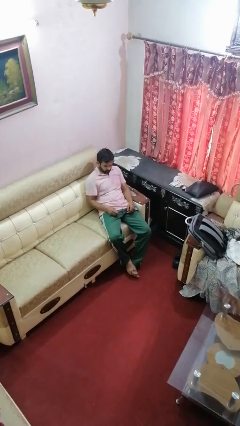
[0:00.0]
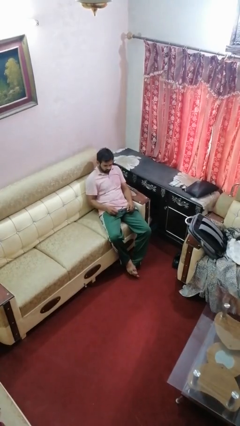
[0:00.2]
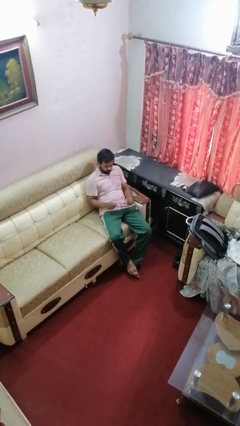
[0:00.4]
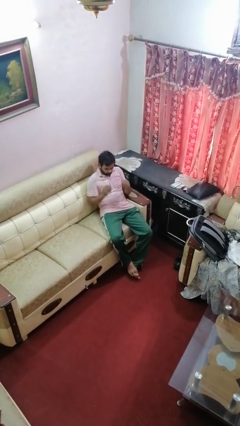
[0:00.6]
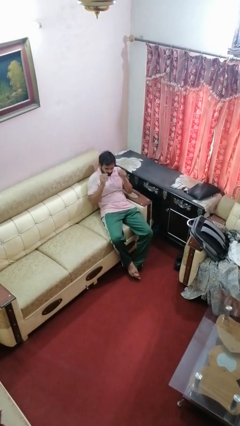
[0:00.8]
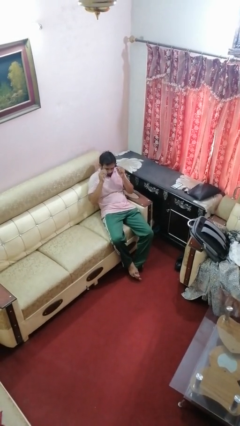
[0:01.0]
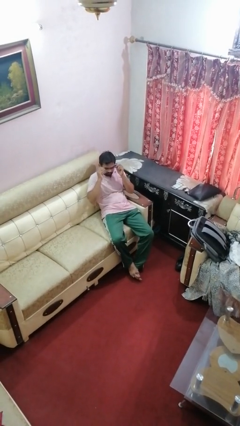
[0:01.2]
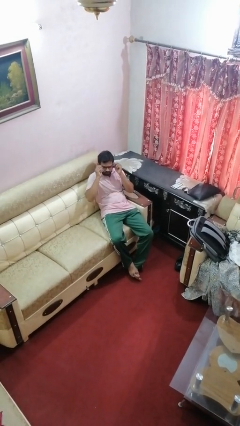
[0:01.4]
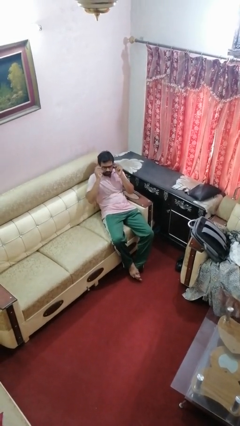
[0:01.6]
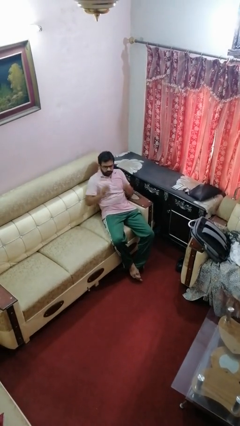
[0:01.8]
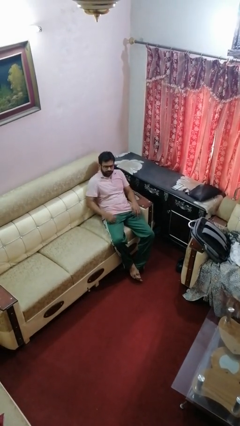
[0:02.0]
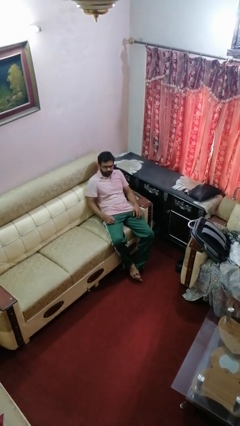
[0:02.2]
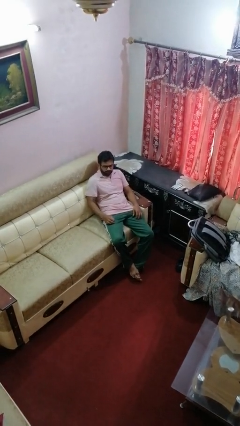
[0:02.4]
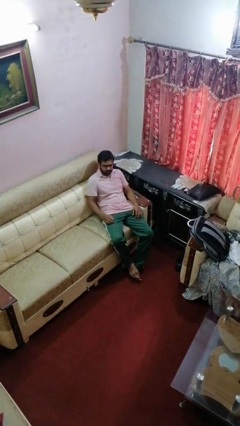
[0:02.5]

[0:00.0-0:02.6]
person puts on glasses

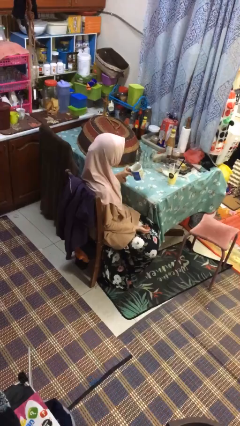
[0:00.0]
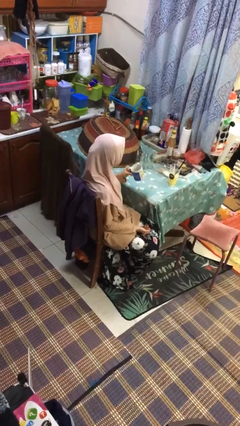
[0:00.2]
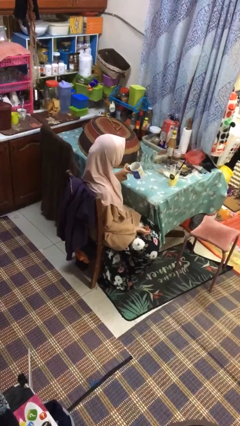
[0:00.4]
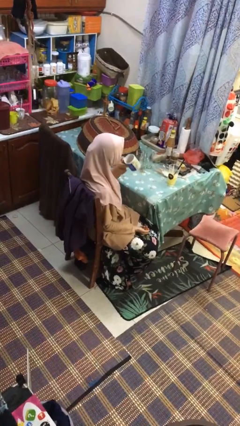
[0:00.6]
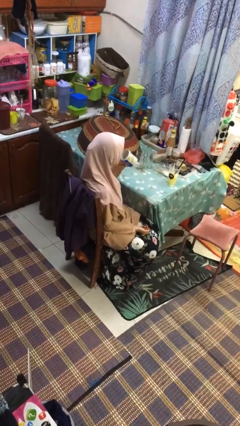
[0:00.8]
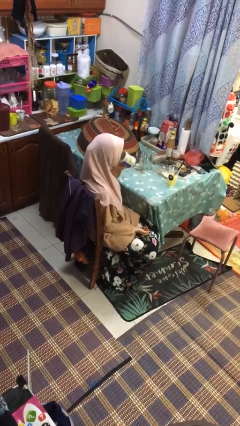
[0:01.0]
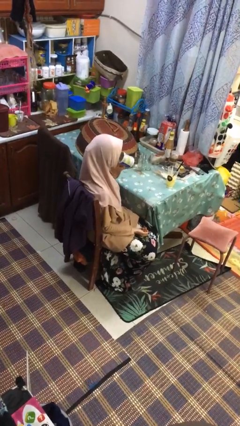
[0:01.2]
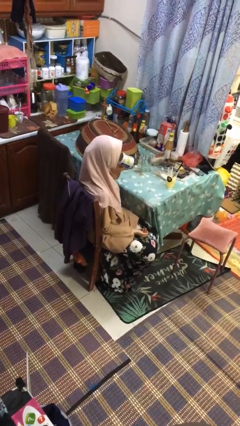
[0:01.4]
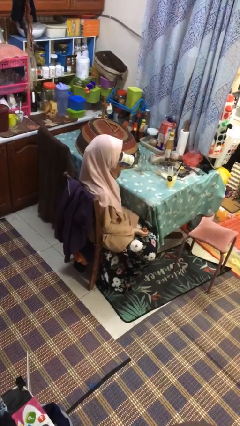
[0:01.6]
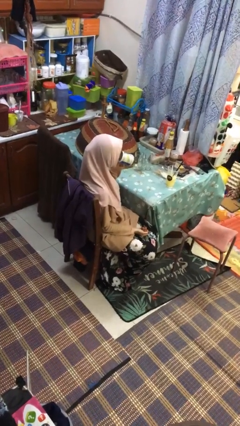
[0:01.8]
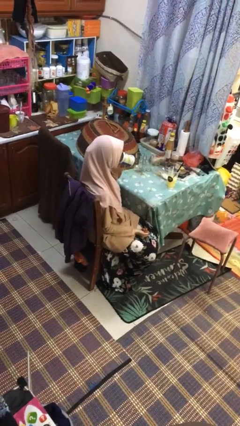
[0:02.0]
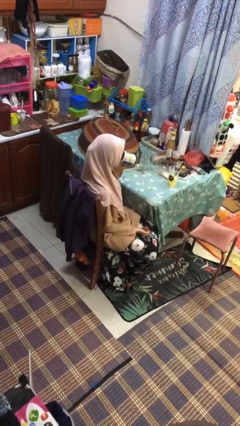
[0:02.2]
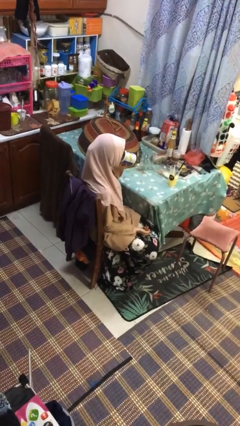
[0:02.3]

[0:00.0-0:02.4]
person drinks from mug

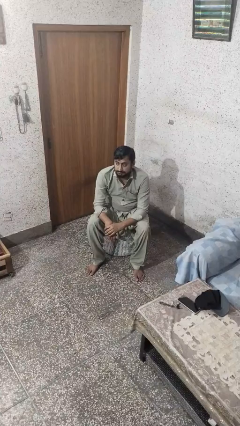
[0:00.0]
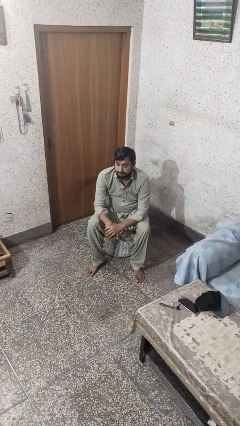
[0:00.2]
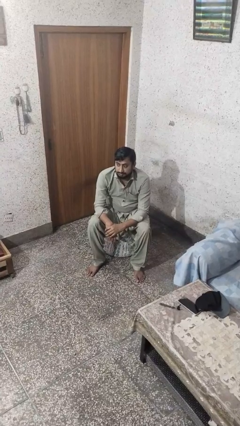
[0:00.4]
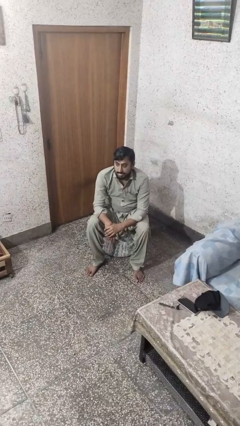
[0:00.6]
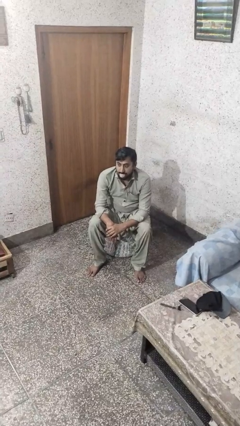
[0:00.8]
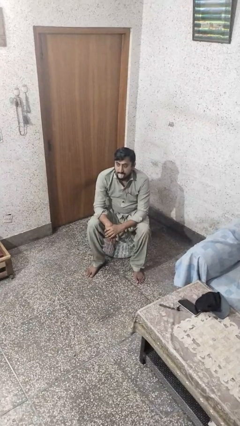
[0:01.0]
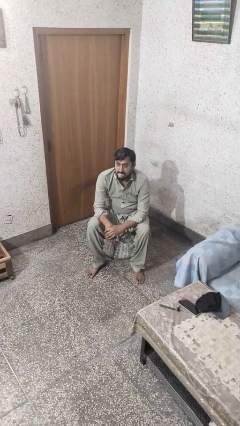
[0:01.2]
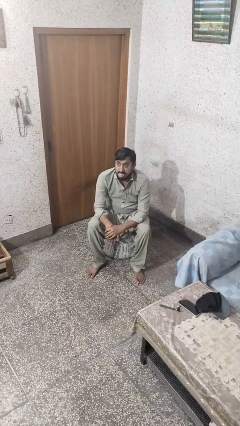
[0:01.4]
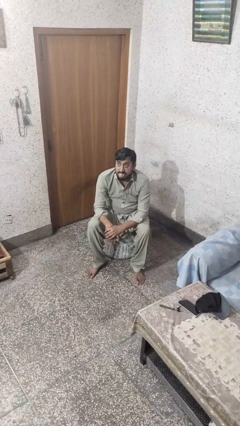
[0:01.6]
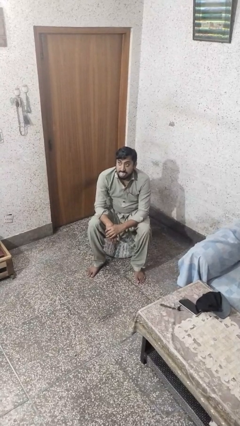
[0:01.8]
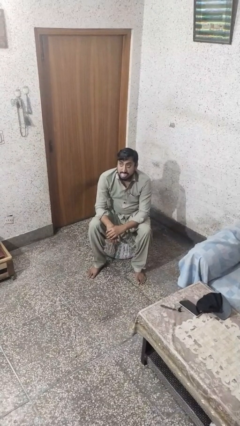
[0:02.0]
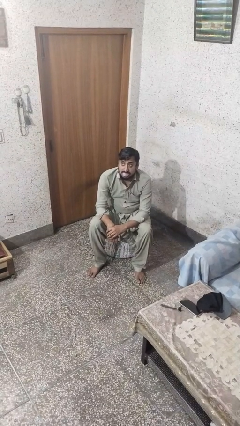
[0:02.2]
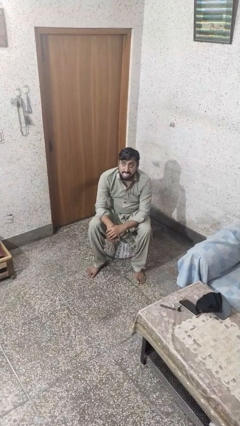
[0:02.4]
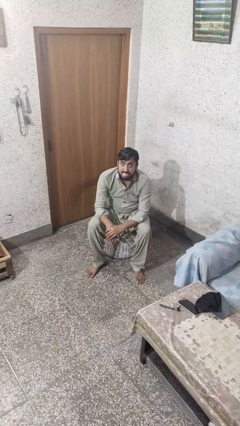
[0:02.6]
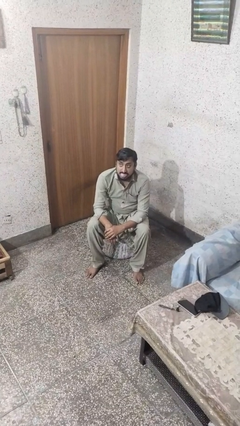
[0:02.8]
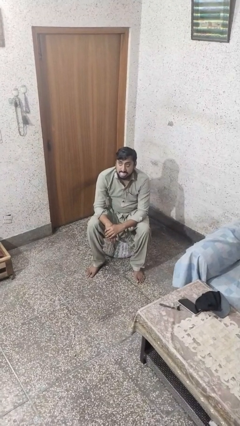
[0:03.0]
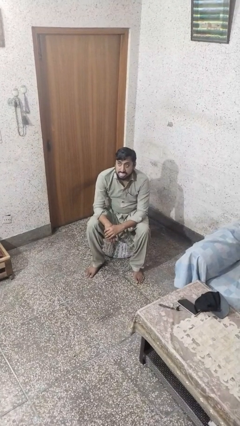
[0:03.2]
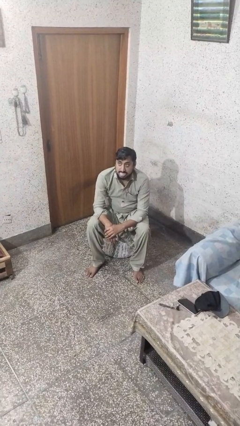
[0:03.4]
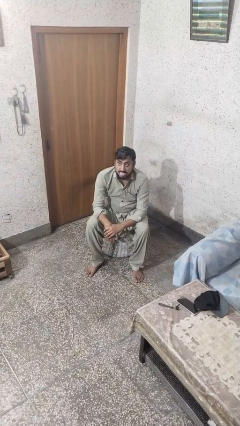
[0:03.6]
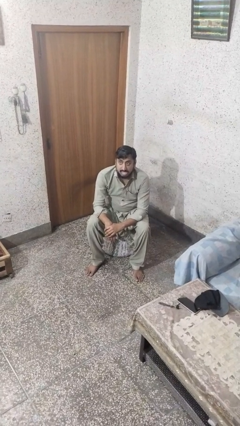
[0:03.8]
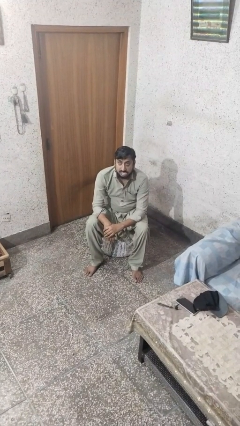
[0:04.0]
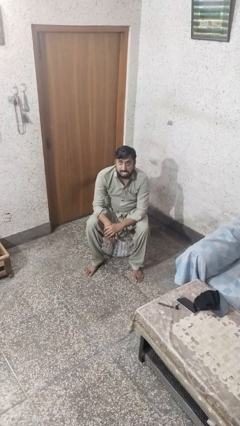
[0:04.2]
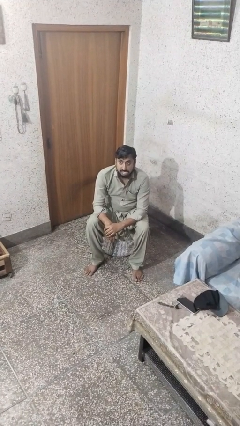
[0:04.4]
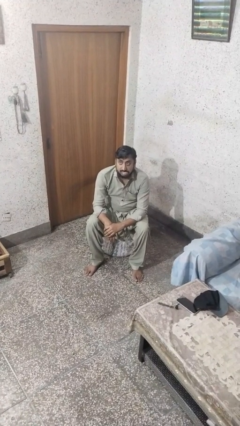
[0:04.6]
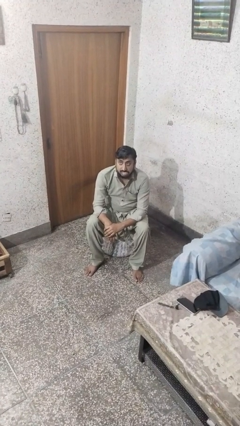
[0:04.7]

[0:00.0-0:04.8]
person sticks out tongue

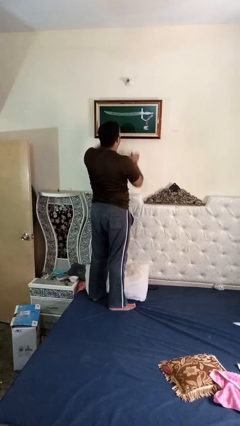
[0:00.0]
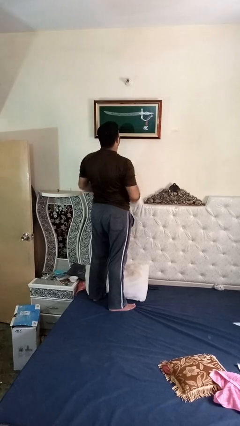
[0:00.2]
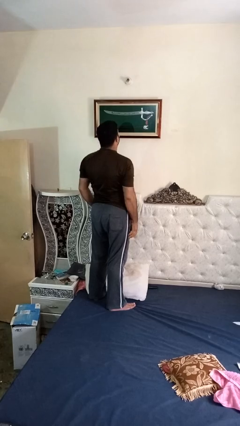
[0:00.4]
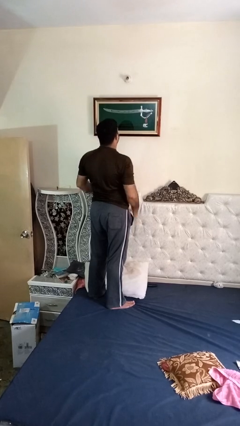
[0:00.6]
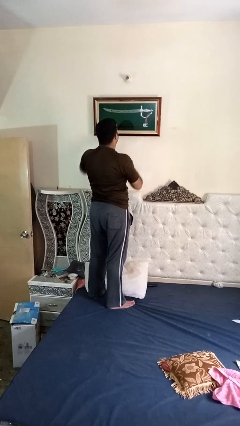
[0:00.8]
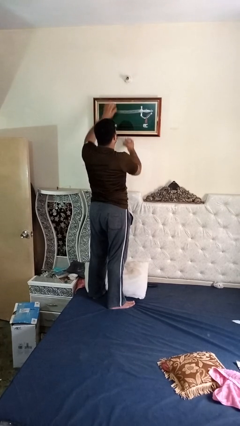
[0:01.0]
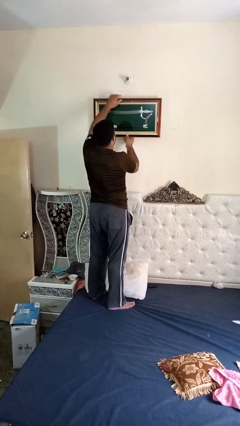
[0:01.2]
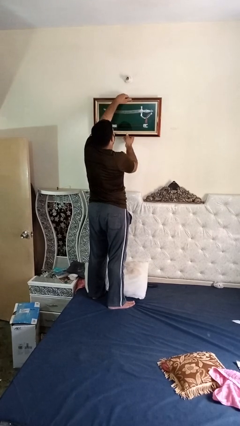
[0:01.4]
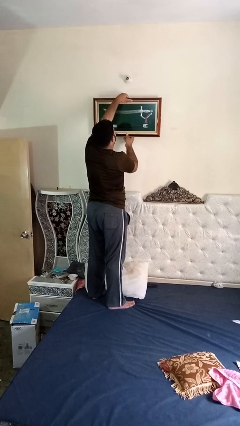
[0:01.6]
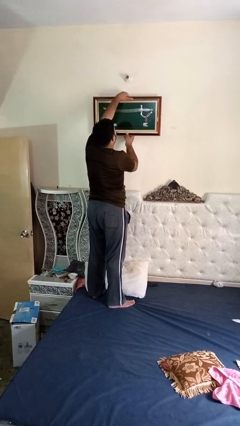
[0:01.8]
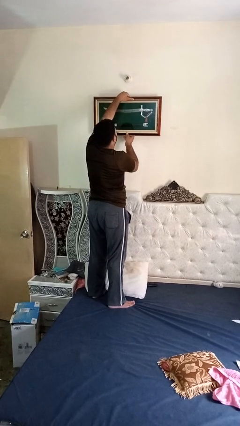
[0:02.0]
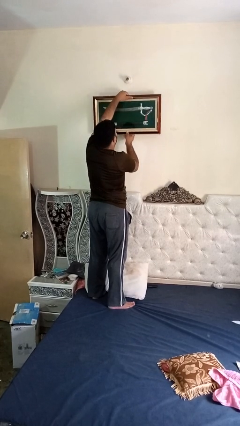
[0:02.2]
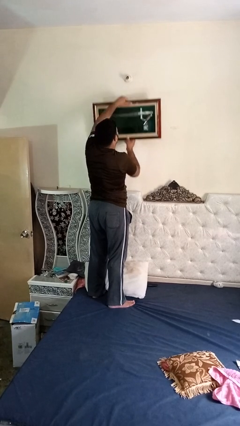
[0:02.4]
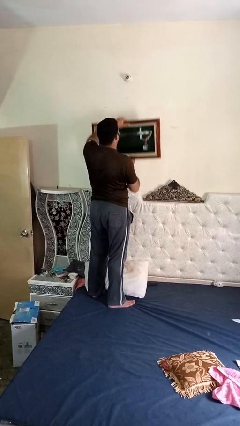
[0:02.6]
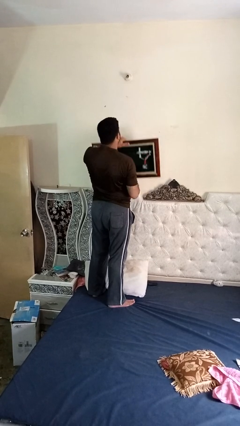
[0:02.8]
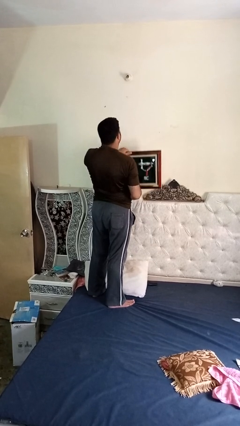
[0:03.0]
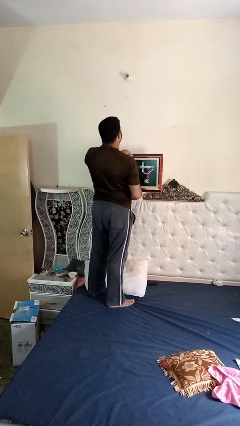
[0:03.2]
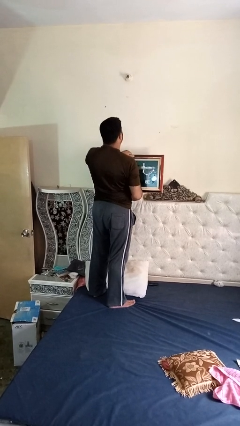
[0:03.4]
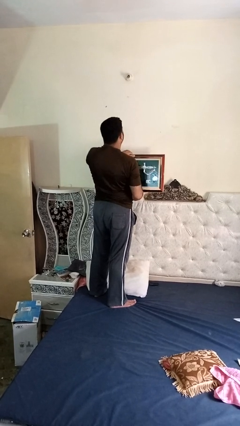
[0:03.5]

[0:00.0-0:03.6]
person takes down picture frame

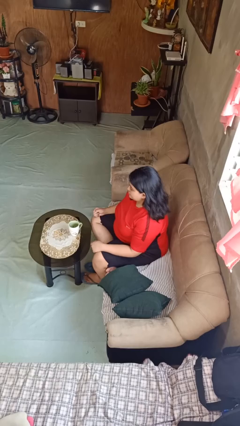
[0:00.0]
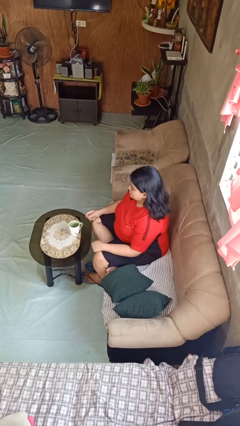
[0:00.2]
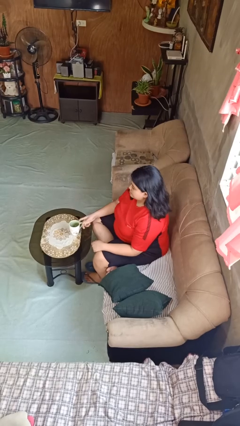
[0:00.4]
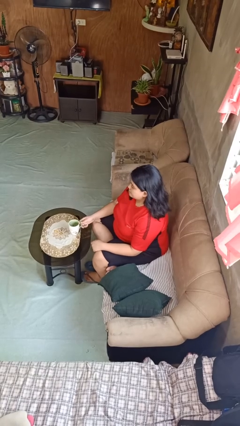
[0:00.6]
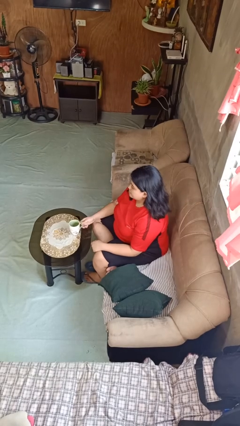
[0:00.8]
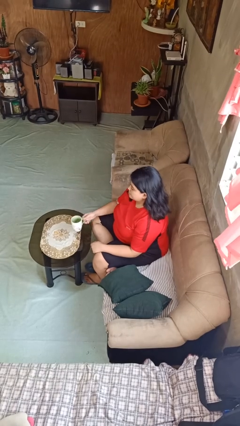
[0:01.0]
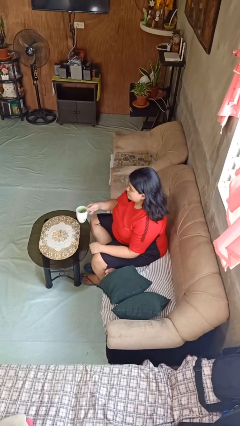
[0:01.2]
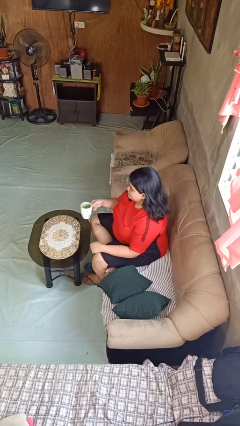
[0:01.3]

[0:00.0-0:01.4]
person picks up object from table

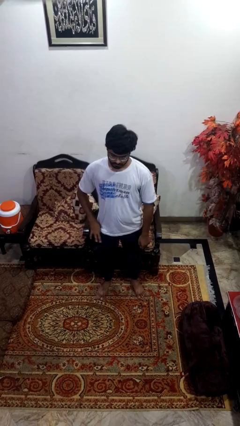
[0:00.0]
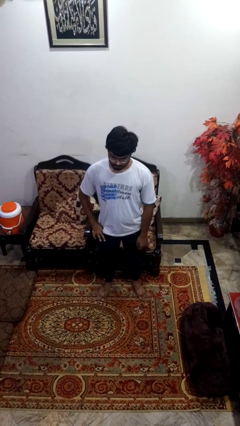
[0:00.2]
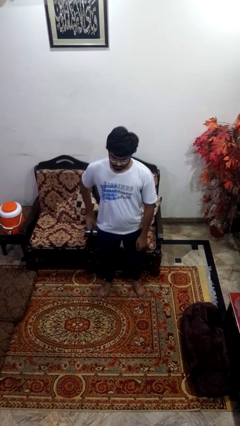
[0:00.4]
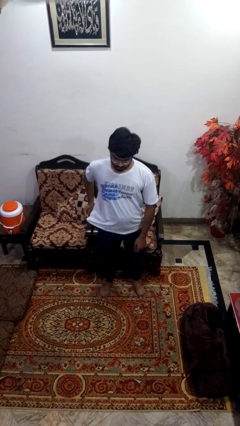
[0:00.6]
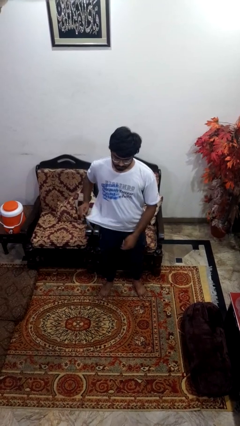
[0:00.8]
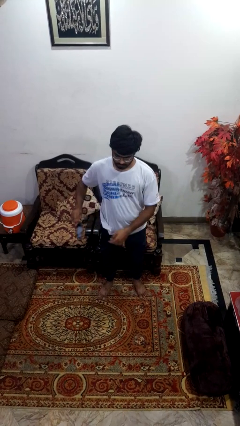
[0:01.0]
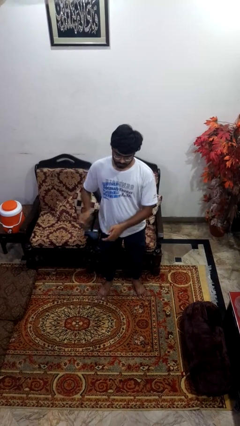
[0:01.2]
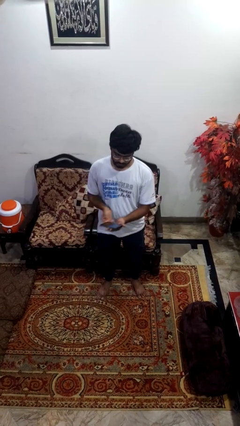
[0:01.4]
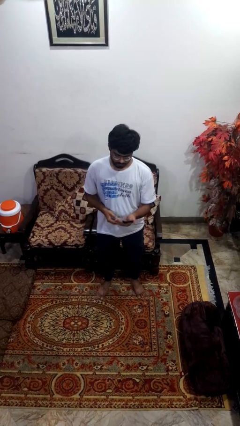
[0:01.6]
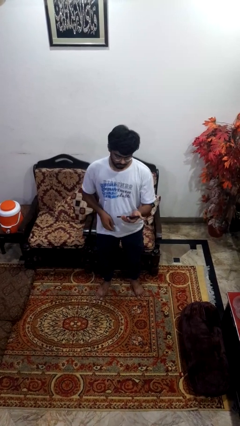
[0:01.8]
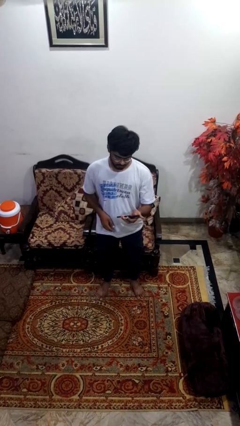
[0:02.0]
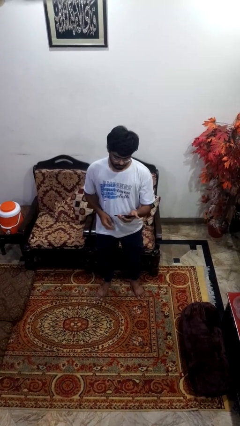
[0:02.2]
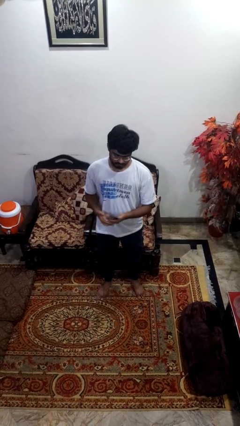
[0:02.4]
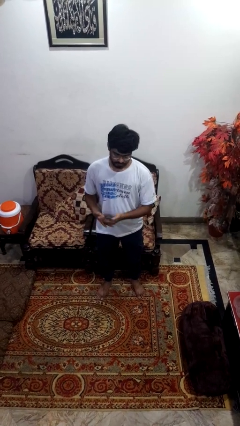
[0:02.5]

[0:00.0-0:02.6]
person takes phone from pocket
